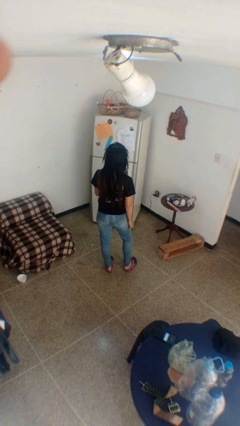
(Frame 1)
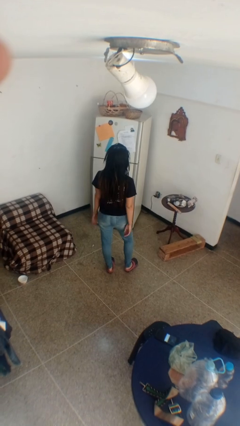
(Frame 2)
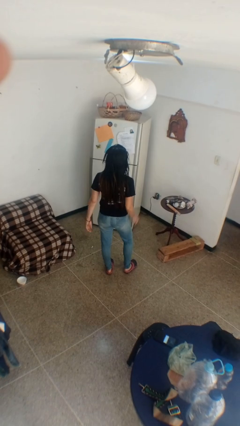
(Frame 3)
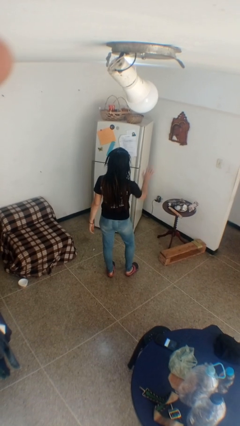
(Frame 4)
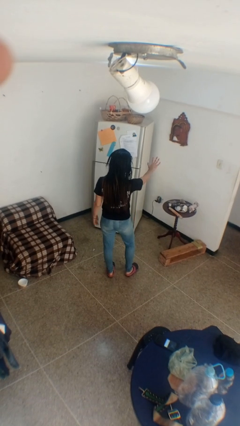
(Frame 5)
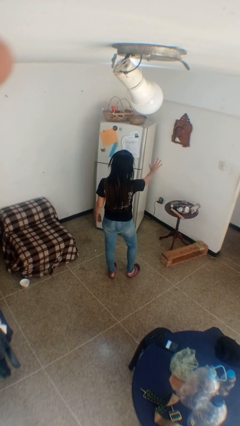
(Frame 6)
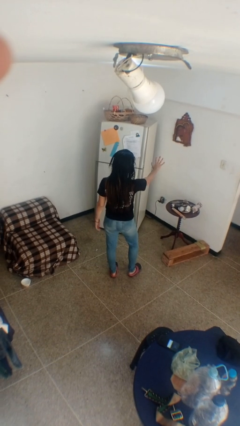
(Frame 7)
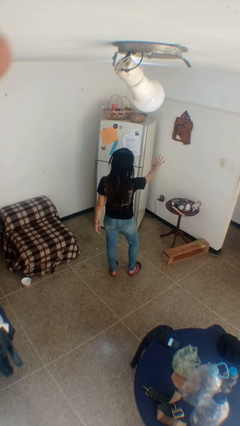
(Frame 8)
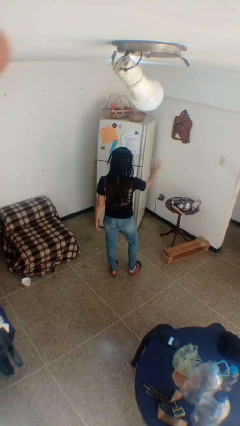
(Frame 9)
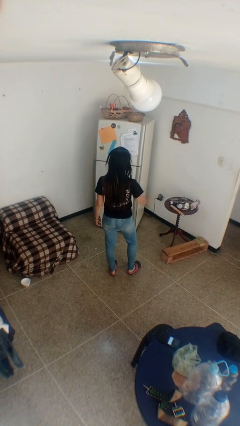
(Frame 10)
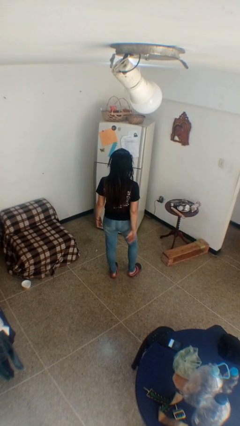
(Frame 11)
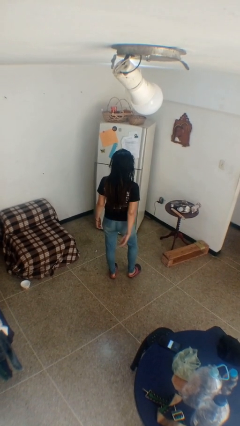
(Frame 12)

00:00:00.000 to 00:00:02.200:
person gestures stop

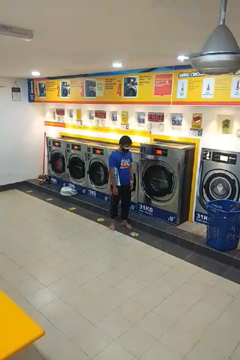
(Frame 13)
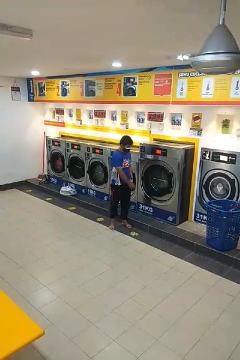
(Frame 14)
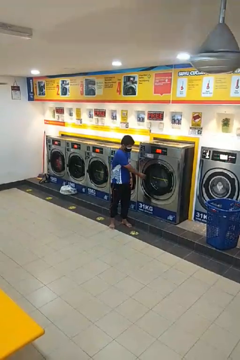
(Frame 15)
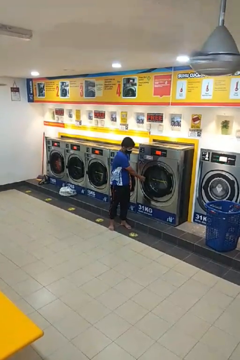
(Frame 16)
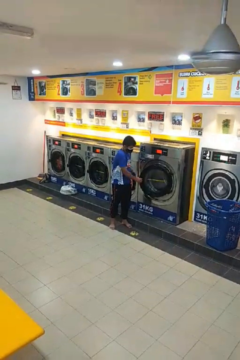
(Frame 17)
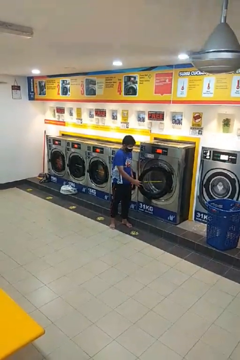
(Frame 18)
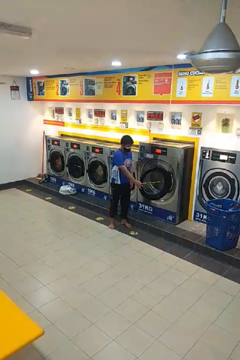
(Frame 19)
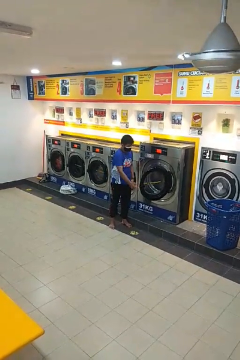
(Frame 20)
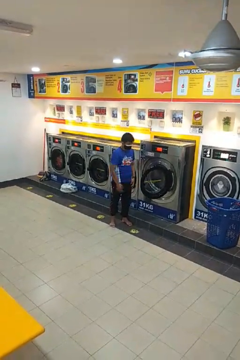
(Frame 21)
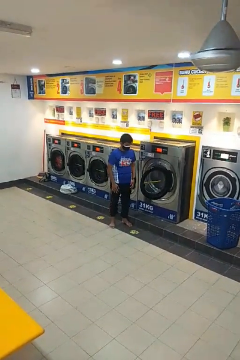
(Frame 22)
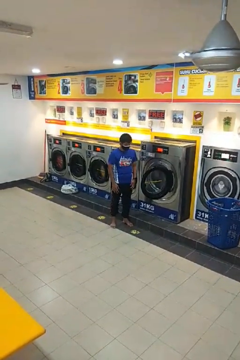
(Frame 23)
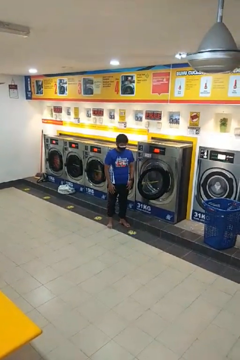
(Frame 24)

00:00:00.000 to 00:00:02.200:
person opens clothes washer

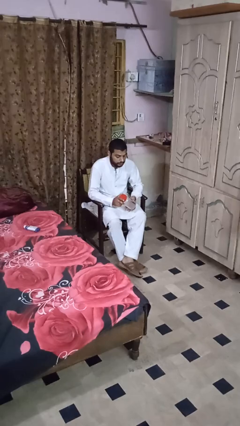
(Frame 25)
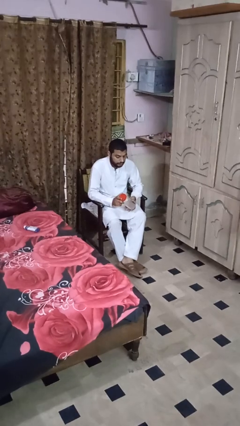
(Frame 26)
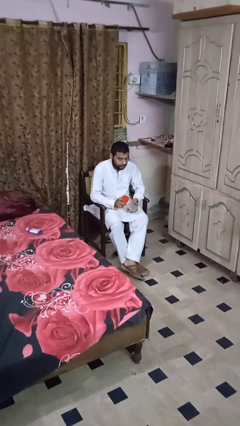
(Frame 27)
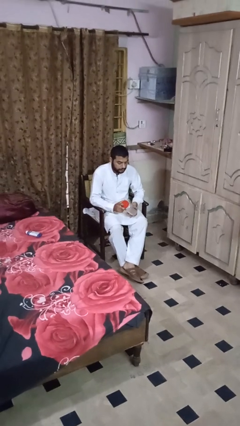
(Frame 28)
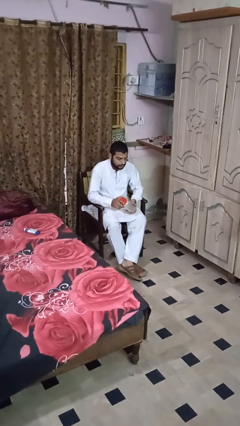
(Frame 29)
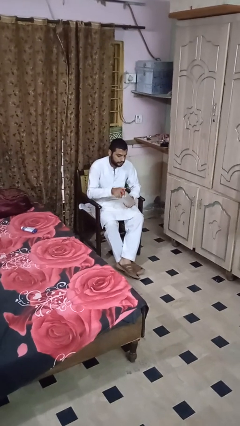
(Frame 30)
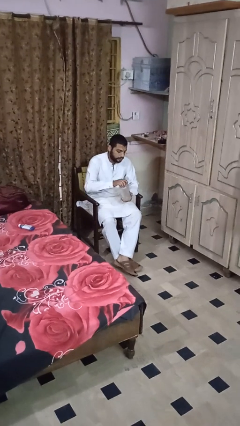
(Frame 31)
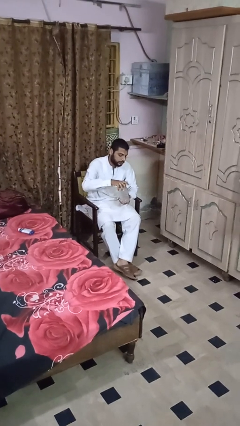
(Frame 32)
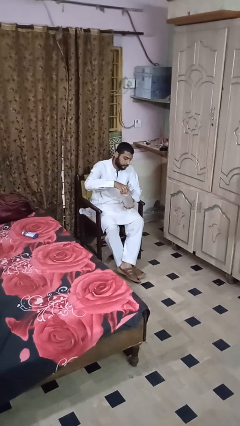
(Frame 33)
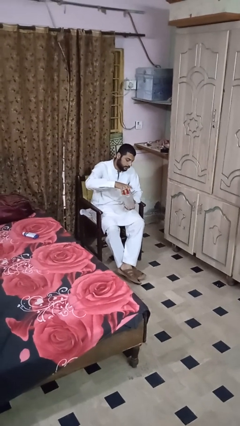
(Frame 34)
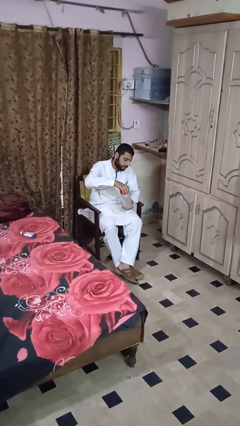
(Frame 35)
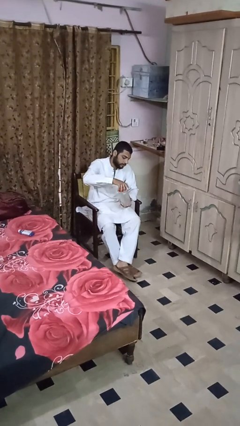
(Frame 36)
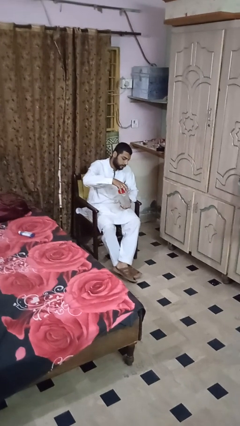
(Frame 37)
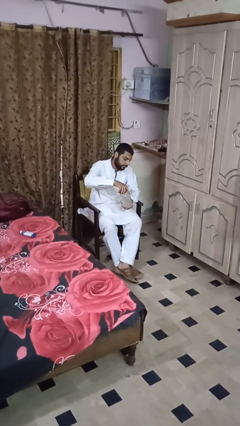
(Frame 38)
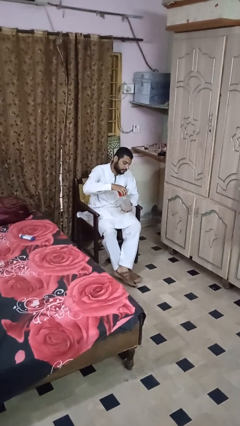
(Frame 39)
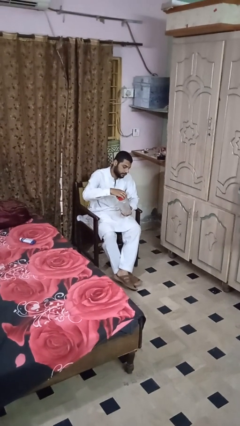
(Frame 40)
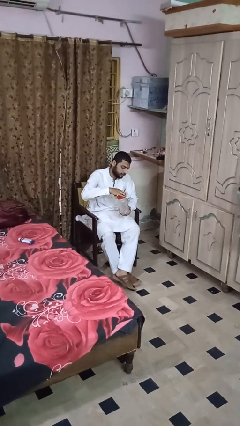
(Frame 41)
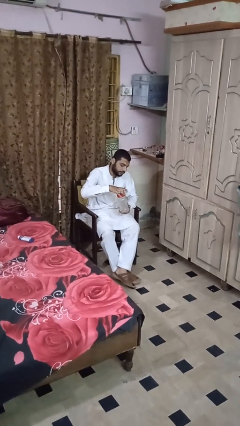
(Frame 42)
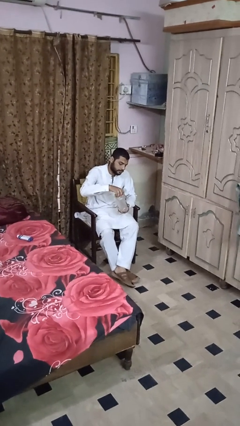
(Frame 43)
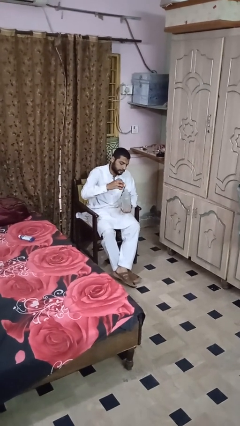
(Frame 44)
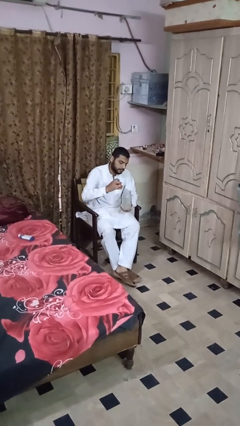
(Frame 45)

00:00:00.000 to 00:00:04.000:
person opens jar

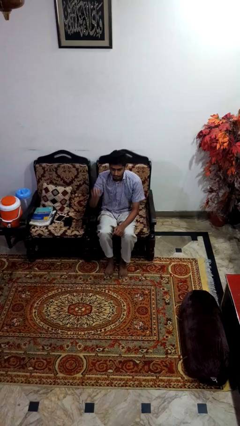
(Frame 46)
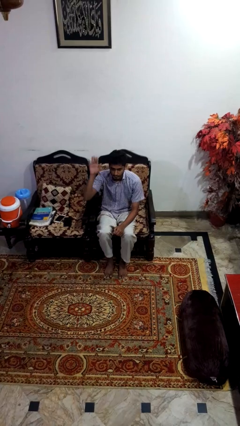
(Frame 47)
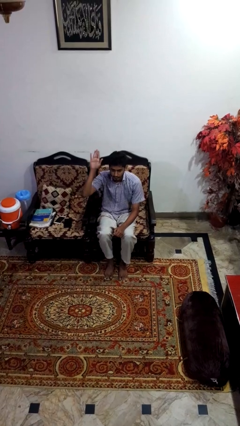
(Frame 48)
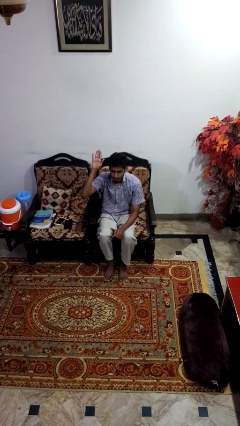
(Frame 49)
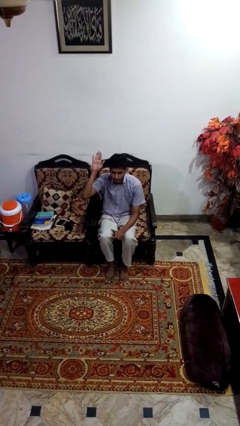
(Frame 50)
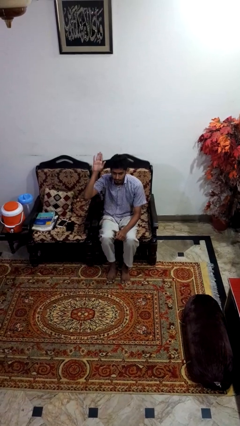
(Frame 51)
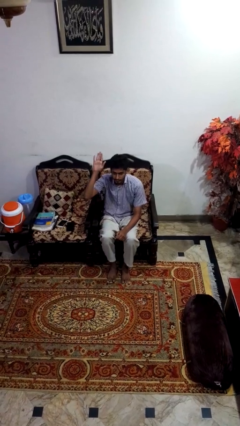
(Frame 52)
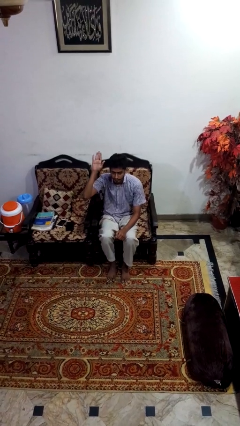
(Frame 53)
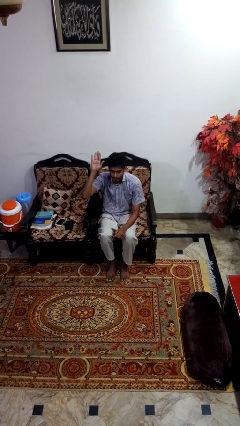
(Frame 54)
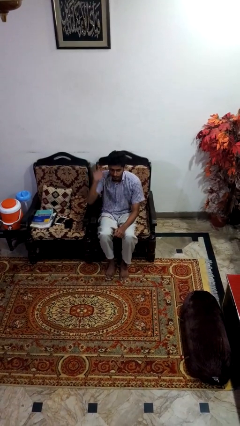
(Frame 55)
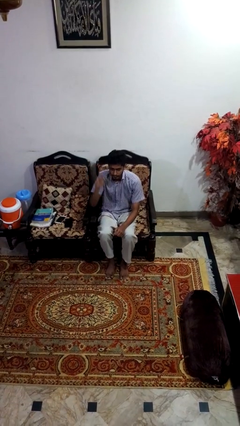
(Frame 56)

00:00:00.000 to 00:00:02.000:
person gestures raise hand

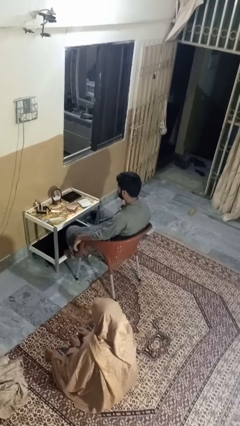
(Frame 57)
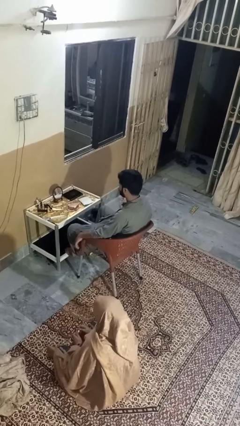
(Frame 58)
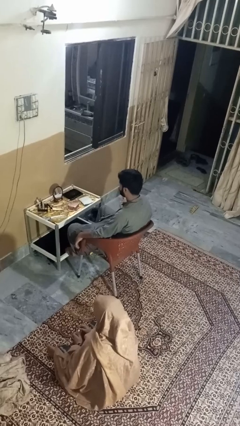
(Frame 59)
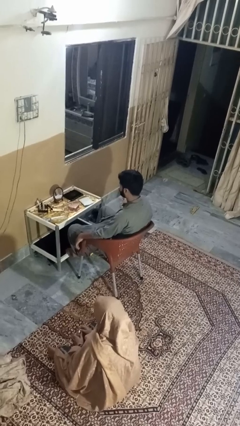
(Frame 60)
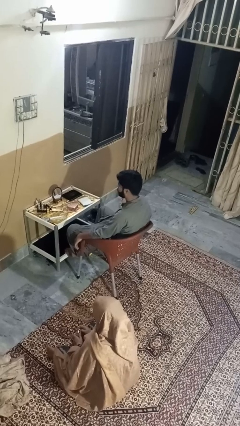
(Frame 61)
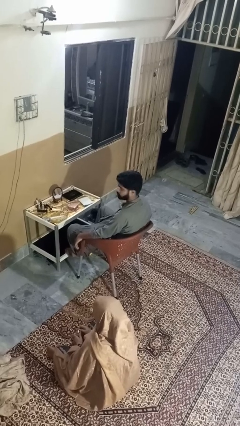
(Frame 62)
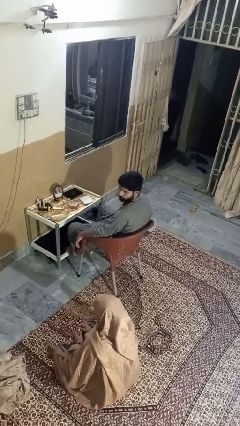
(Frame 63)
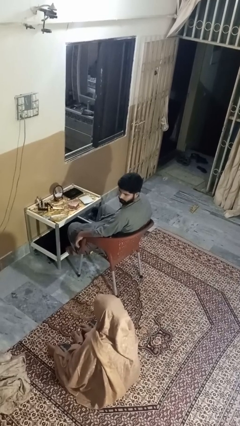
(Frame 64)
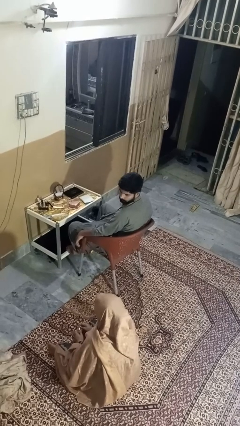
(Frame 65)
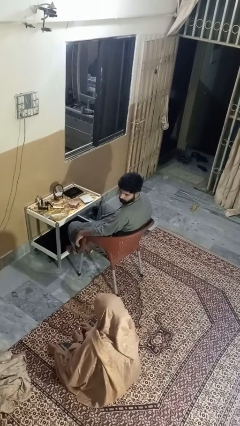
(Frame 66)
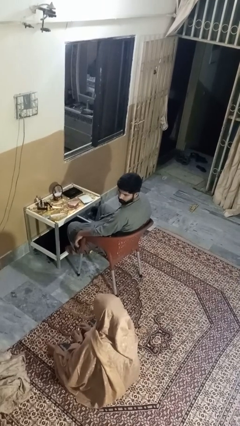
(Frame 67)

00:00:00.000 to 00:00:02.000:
person looks over shoulder

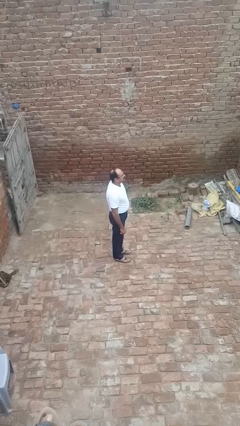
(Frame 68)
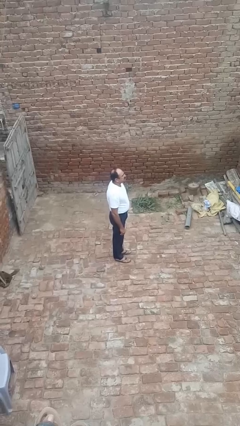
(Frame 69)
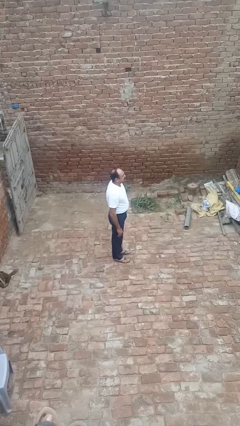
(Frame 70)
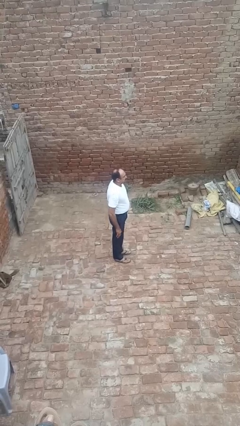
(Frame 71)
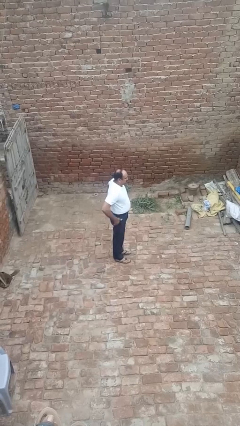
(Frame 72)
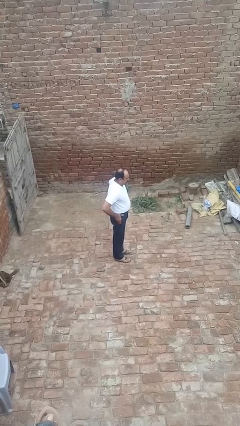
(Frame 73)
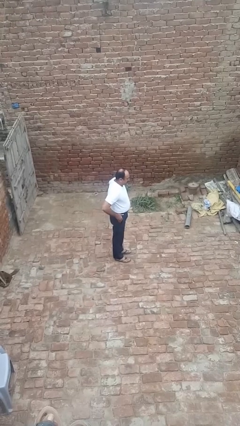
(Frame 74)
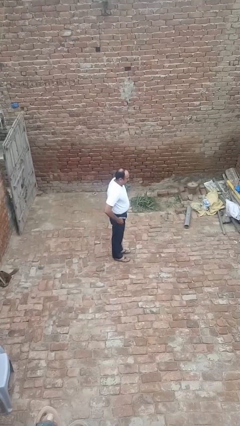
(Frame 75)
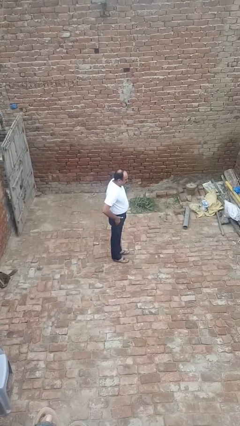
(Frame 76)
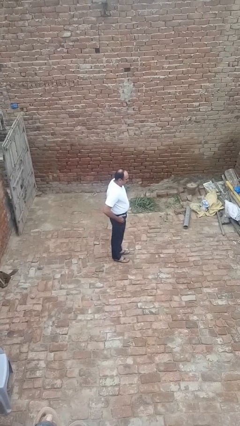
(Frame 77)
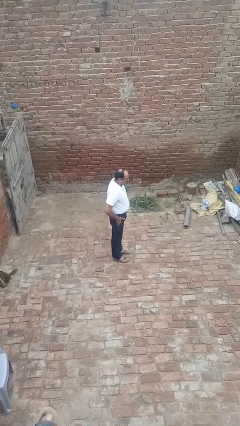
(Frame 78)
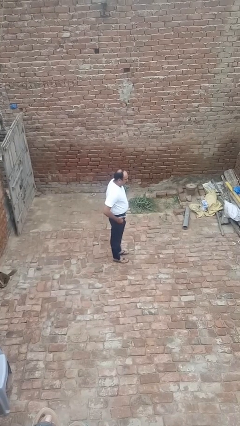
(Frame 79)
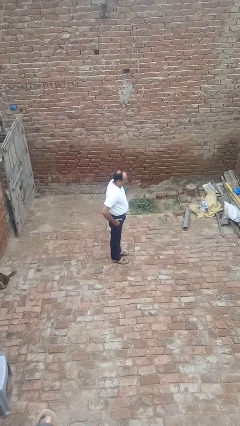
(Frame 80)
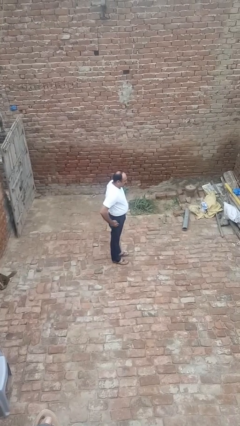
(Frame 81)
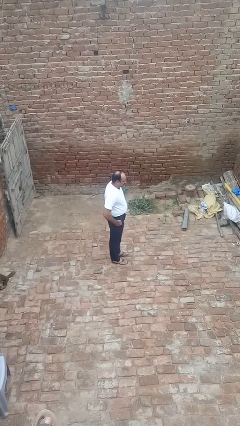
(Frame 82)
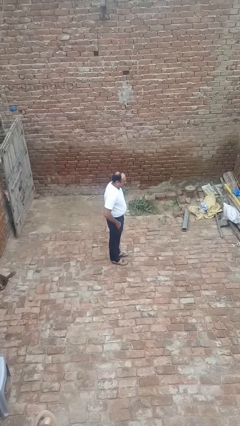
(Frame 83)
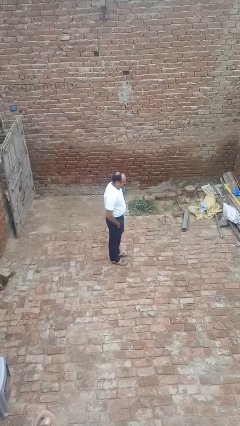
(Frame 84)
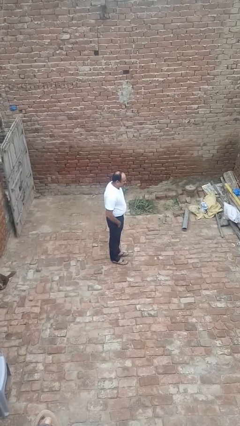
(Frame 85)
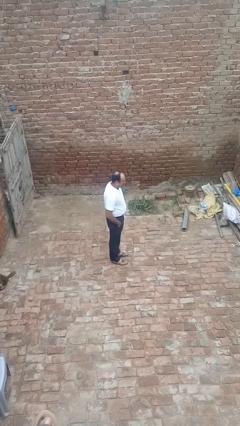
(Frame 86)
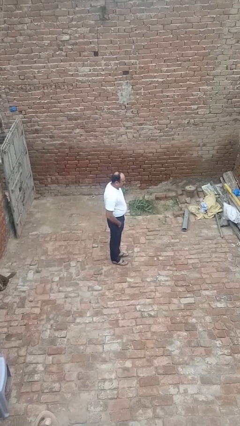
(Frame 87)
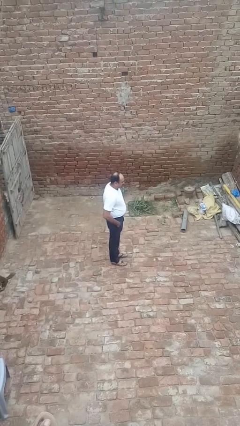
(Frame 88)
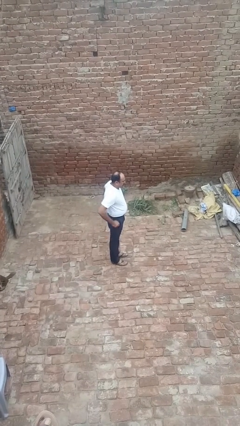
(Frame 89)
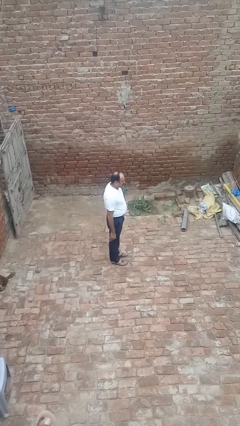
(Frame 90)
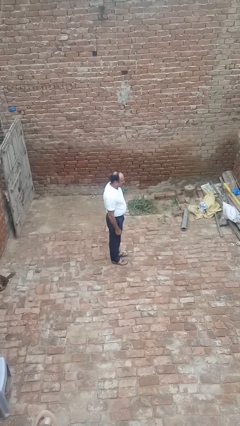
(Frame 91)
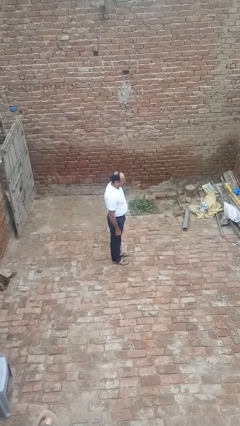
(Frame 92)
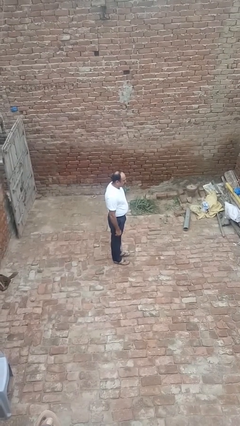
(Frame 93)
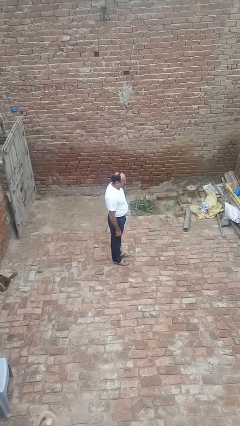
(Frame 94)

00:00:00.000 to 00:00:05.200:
person puts hands in back pockets
